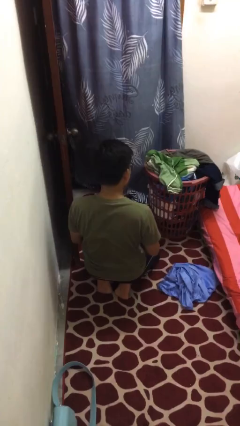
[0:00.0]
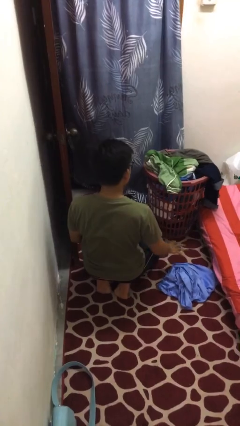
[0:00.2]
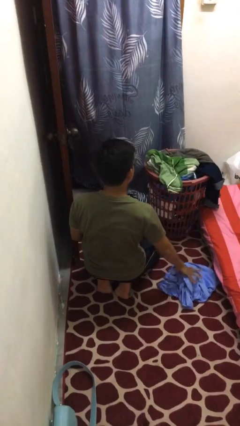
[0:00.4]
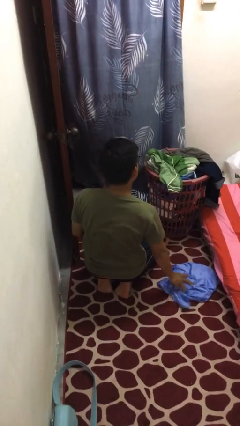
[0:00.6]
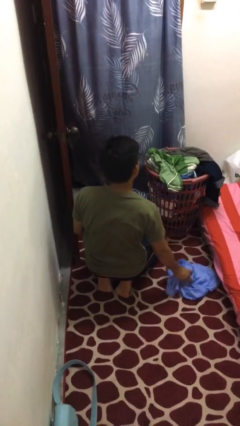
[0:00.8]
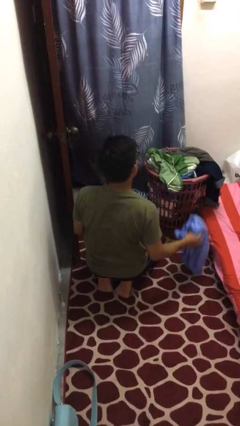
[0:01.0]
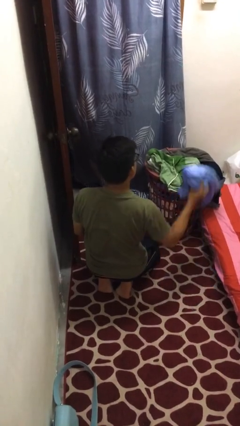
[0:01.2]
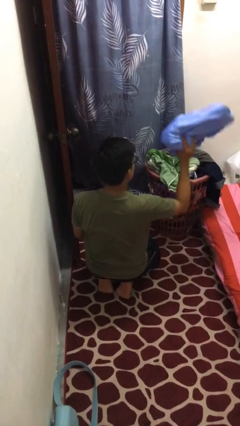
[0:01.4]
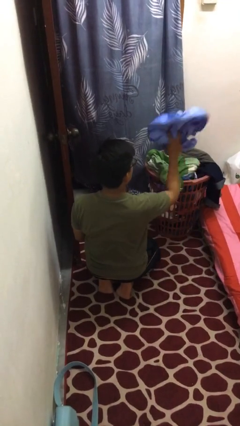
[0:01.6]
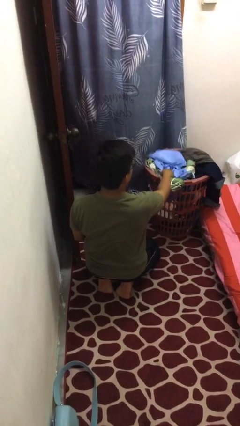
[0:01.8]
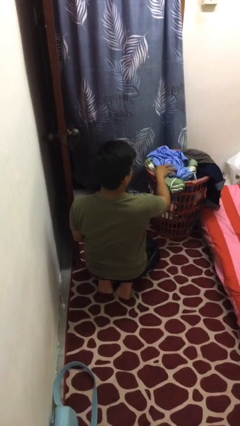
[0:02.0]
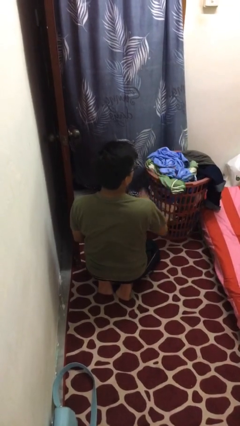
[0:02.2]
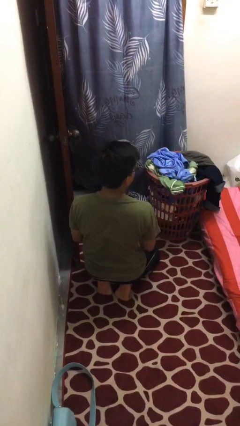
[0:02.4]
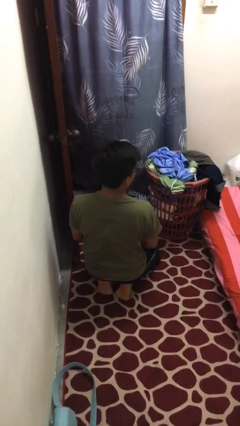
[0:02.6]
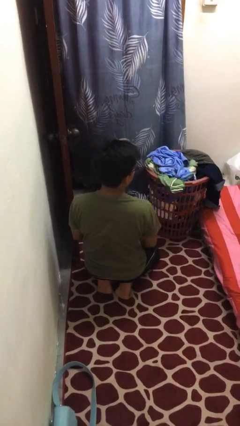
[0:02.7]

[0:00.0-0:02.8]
person puts object into basket

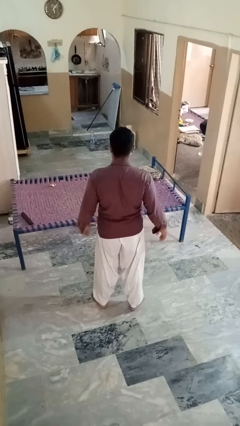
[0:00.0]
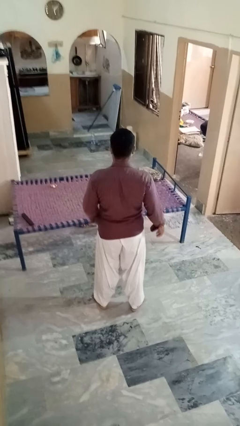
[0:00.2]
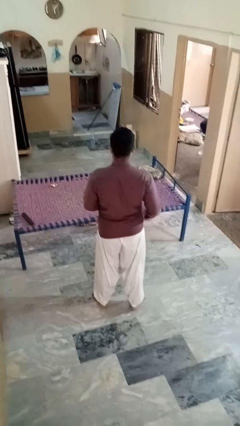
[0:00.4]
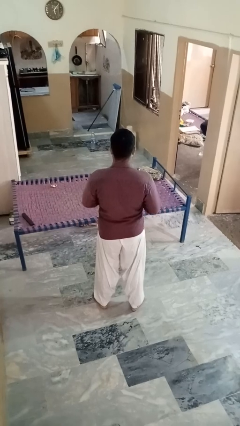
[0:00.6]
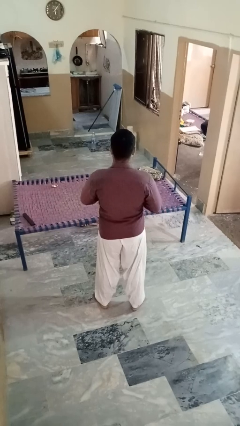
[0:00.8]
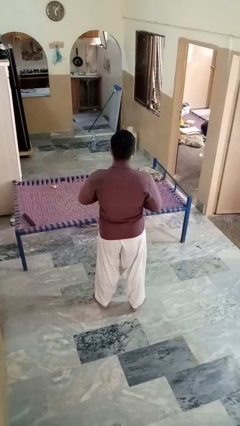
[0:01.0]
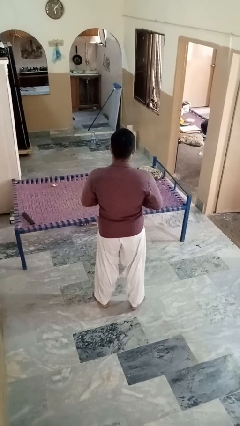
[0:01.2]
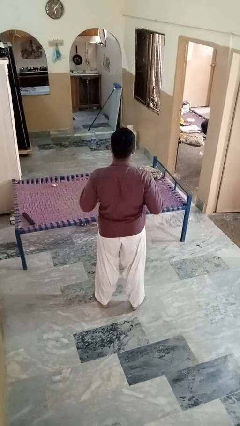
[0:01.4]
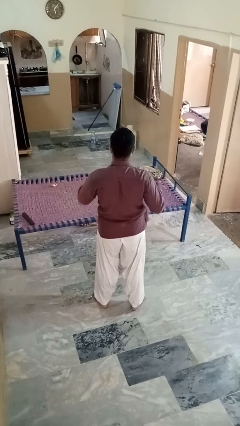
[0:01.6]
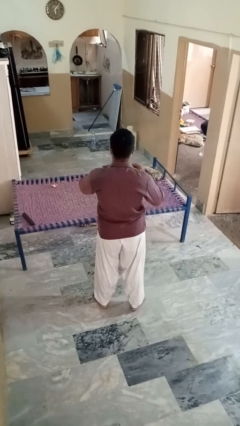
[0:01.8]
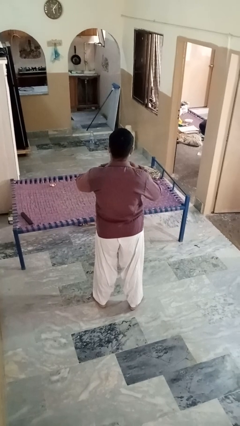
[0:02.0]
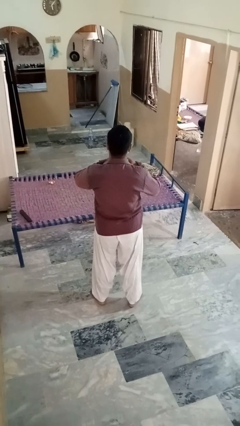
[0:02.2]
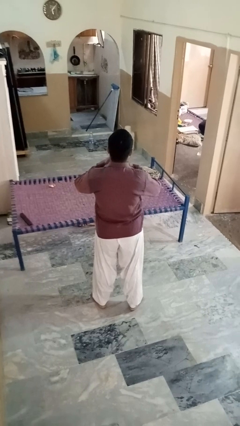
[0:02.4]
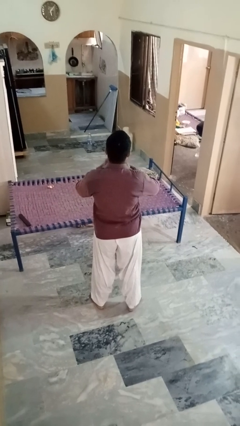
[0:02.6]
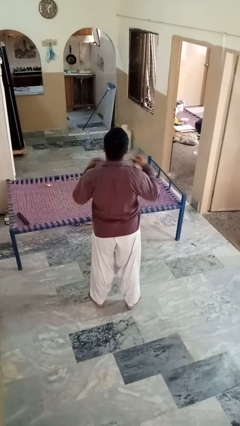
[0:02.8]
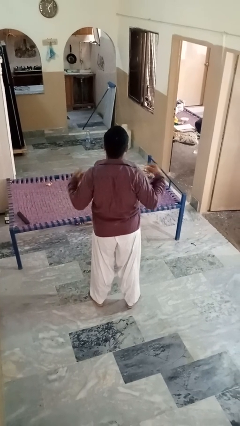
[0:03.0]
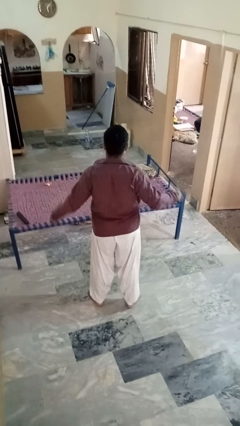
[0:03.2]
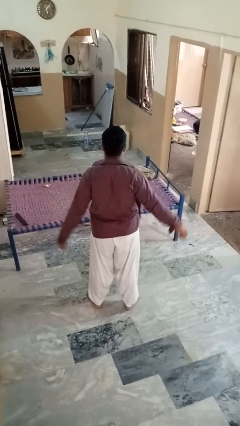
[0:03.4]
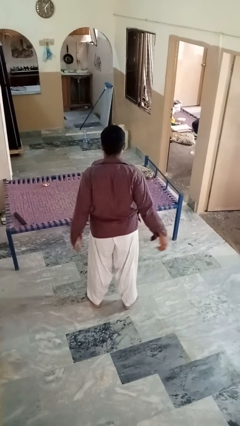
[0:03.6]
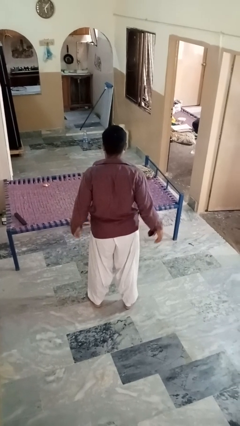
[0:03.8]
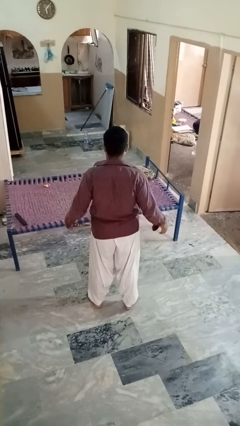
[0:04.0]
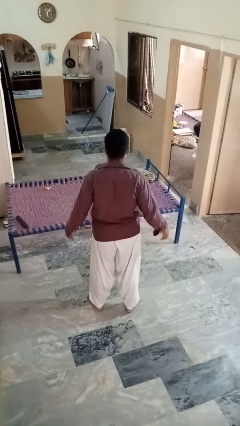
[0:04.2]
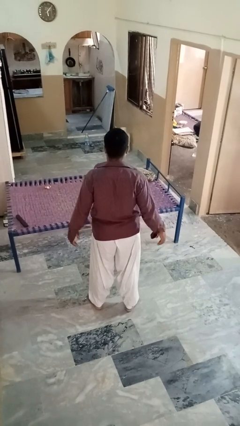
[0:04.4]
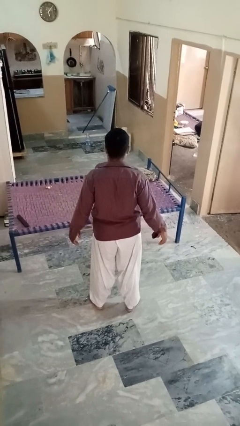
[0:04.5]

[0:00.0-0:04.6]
person unbuttons shirt

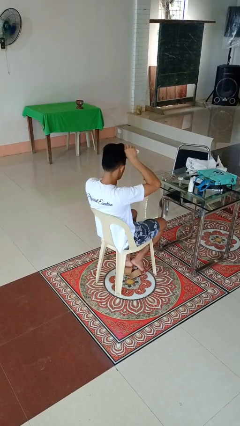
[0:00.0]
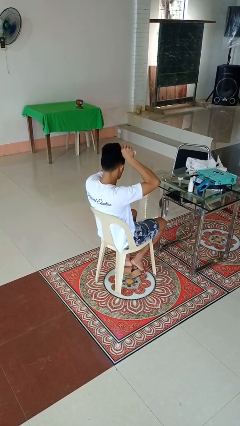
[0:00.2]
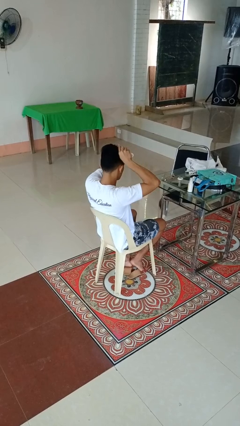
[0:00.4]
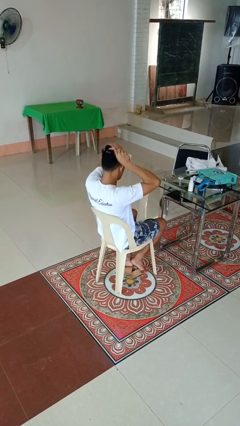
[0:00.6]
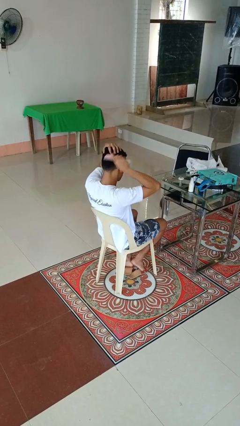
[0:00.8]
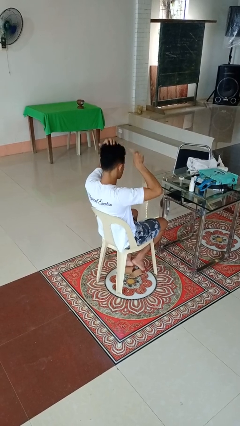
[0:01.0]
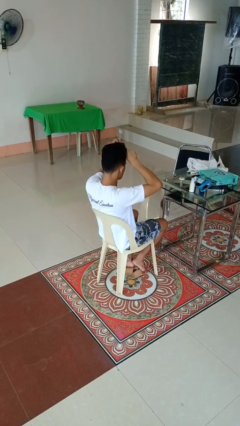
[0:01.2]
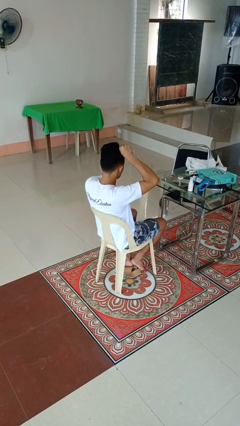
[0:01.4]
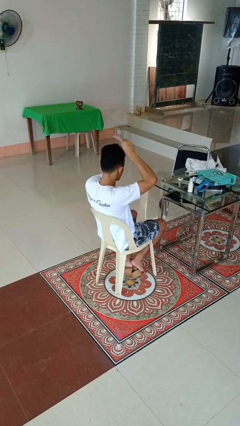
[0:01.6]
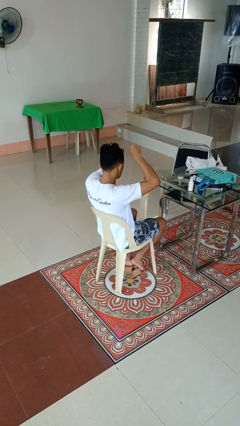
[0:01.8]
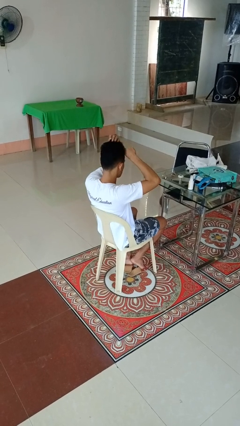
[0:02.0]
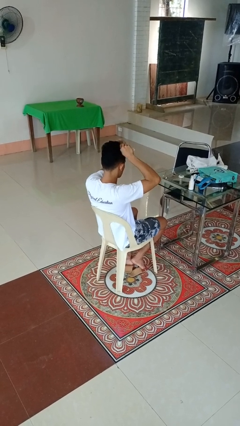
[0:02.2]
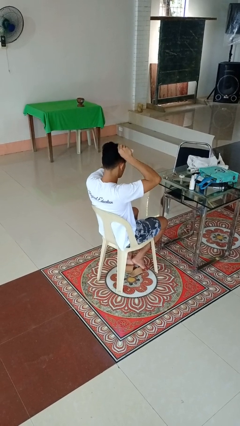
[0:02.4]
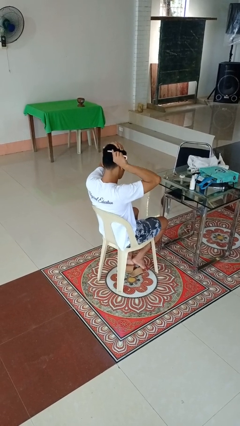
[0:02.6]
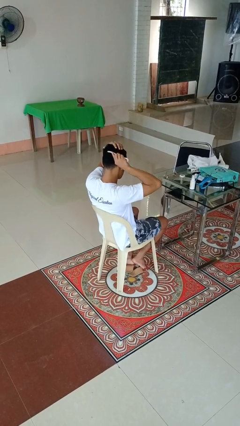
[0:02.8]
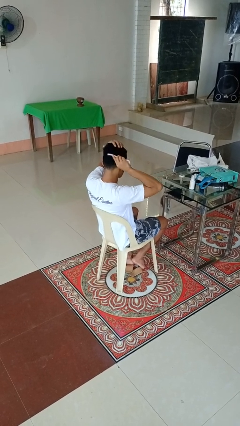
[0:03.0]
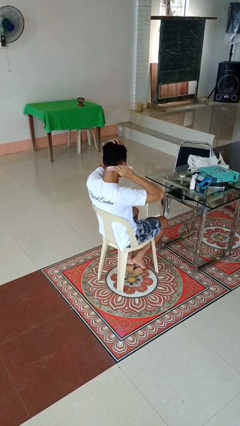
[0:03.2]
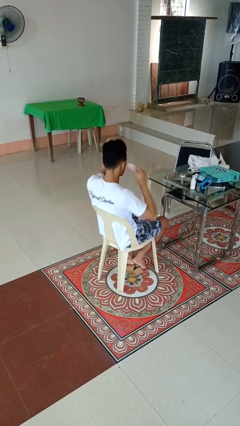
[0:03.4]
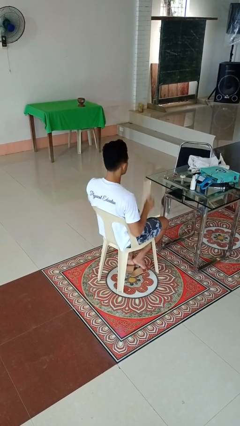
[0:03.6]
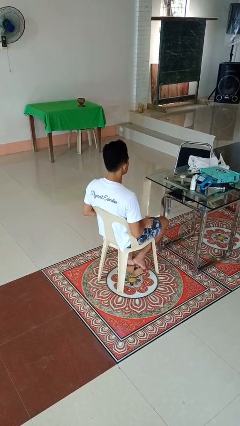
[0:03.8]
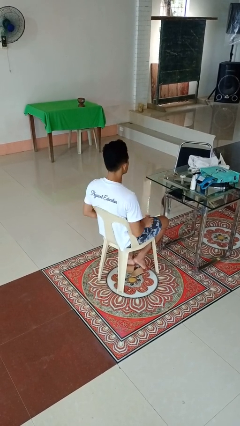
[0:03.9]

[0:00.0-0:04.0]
person brushes hair

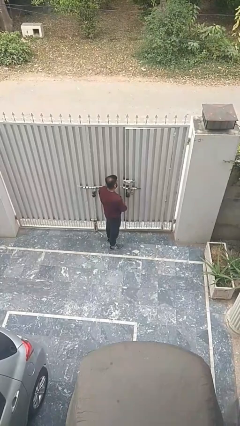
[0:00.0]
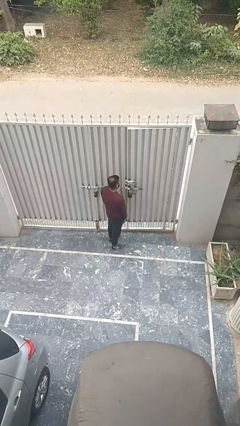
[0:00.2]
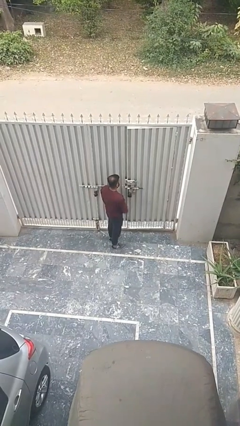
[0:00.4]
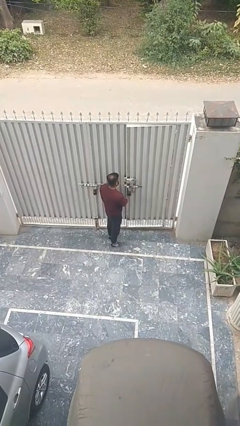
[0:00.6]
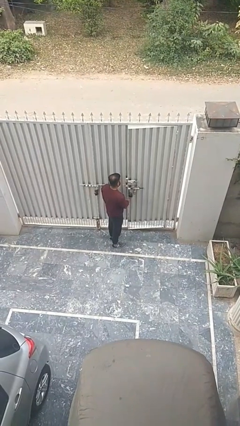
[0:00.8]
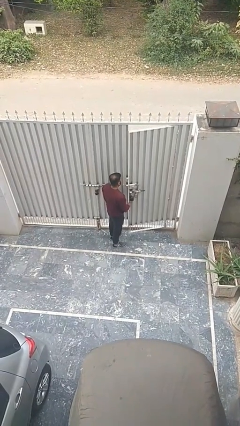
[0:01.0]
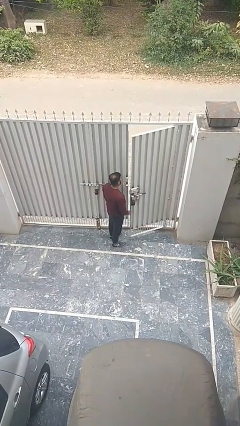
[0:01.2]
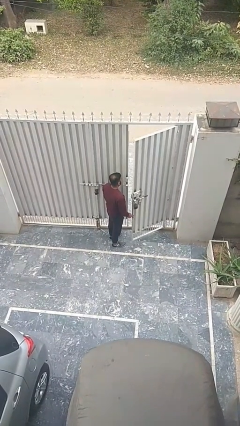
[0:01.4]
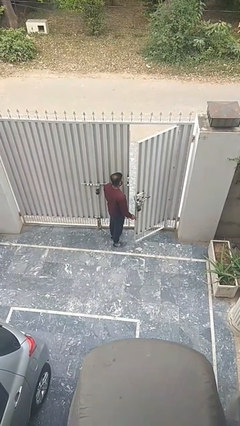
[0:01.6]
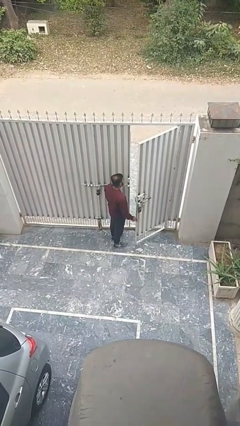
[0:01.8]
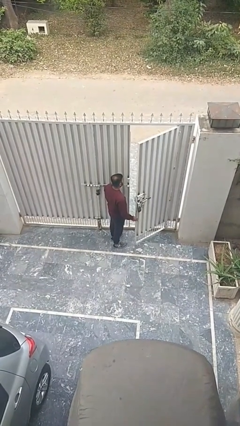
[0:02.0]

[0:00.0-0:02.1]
person opens facility door

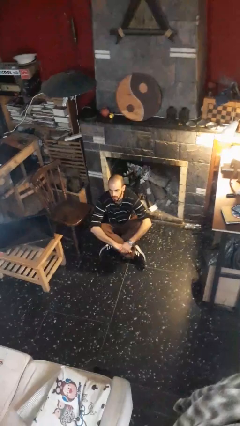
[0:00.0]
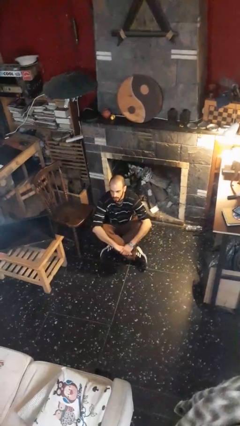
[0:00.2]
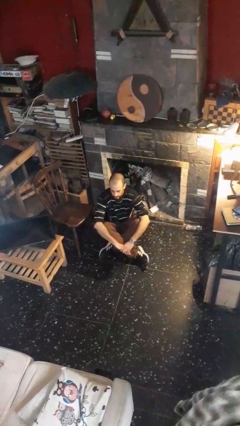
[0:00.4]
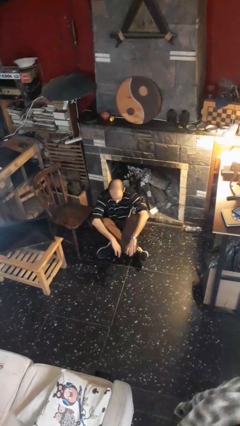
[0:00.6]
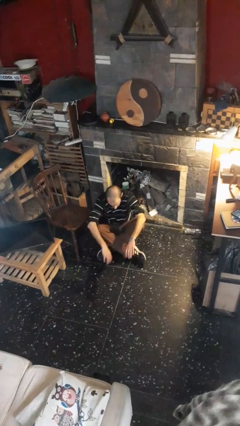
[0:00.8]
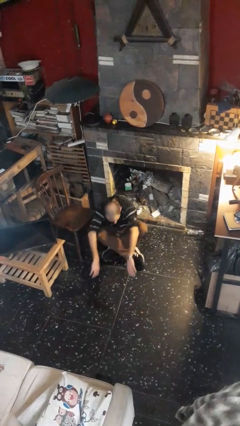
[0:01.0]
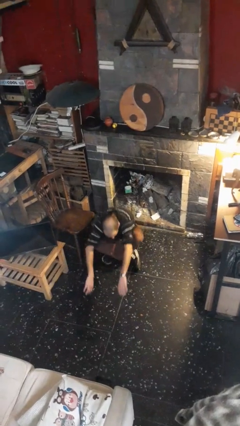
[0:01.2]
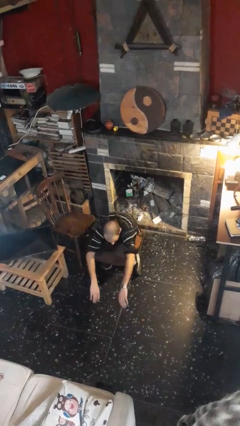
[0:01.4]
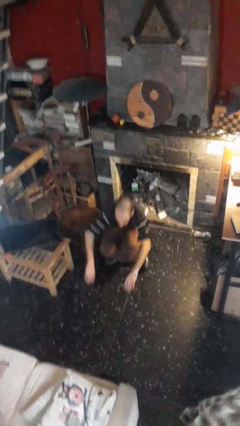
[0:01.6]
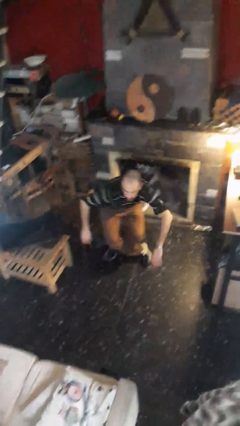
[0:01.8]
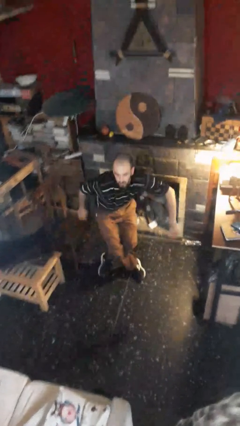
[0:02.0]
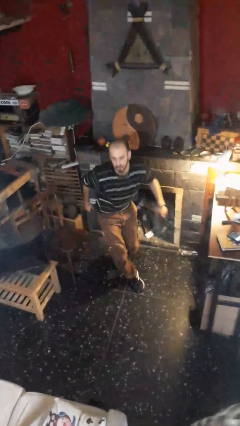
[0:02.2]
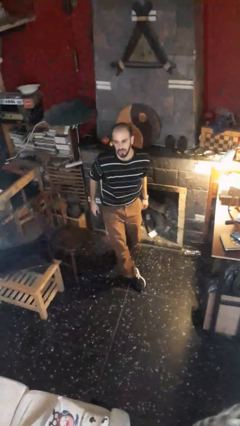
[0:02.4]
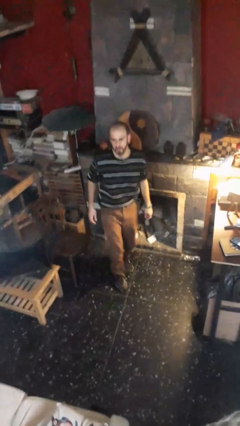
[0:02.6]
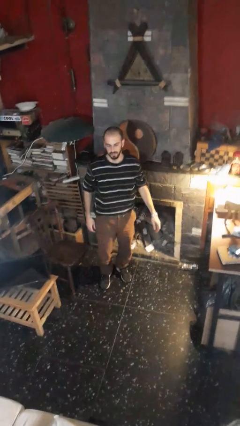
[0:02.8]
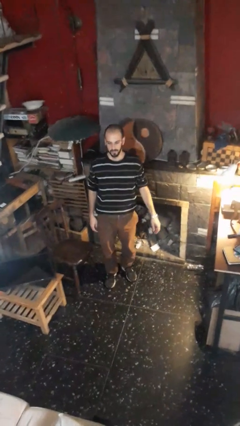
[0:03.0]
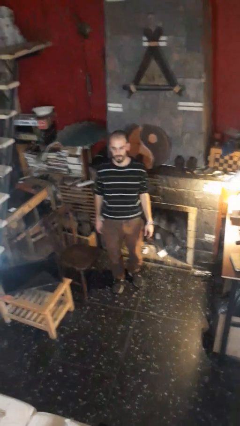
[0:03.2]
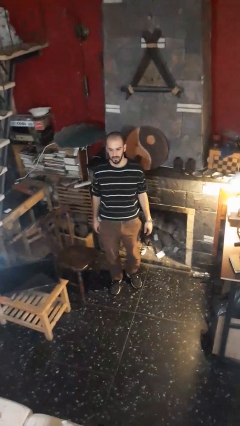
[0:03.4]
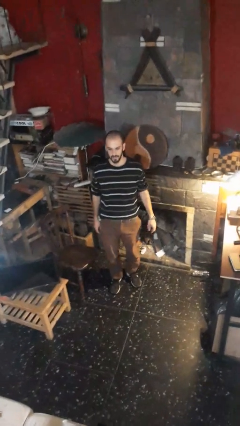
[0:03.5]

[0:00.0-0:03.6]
person stands up from floor

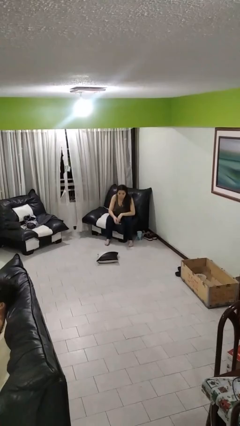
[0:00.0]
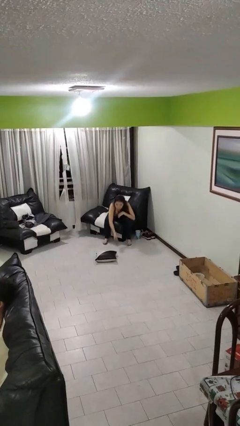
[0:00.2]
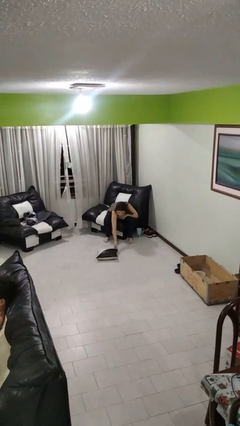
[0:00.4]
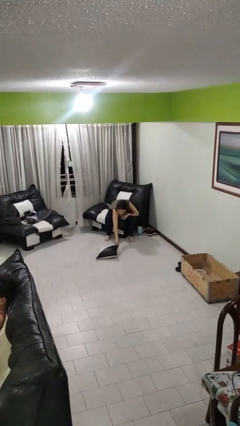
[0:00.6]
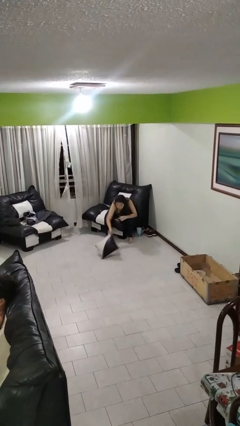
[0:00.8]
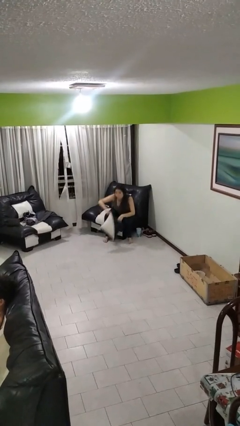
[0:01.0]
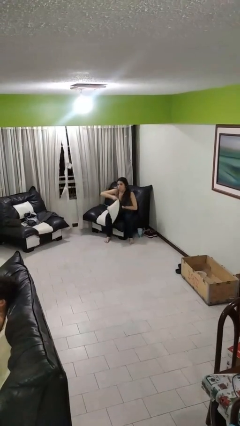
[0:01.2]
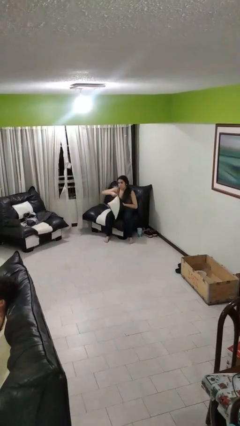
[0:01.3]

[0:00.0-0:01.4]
person picks up object from floor
